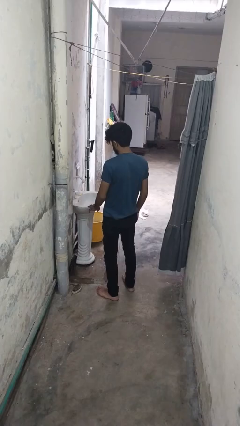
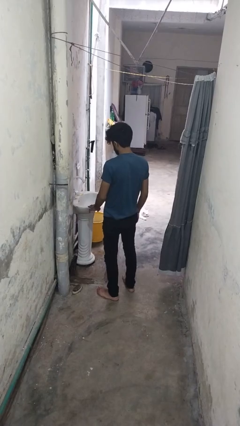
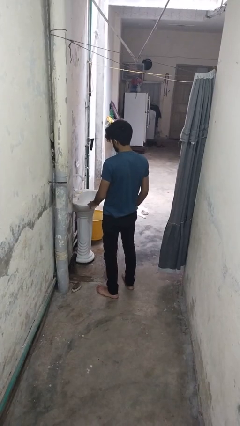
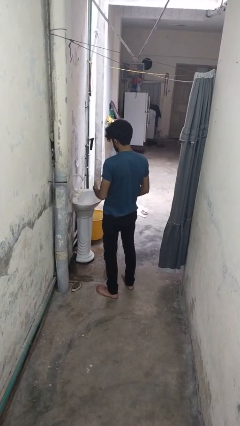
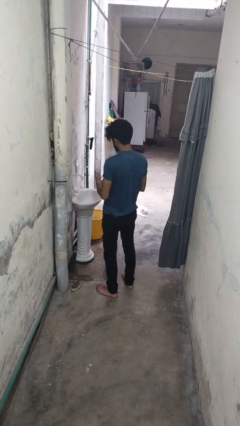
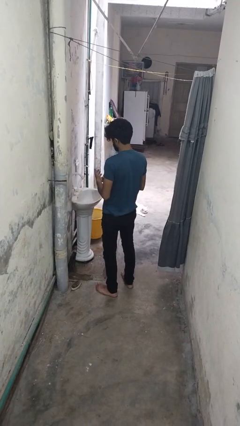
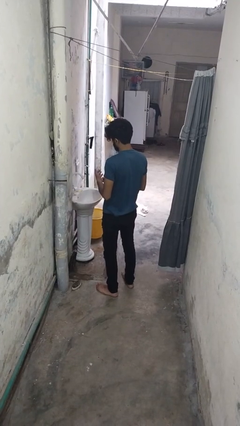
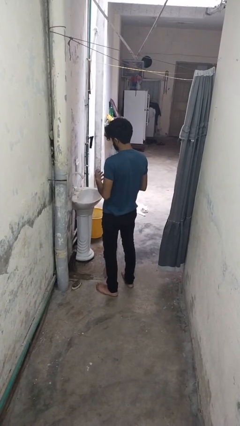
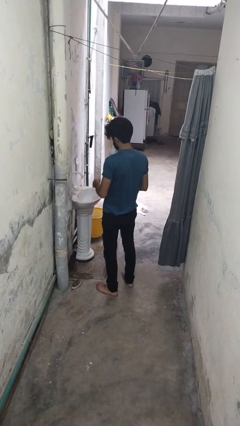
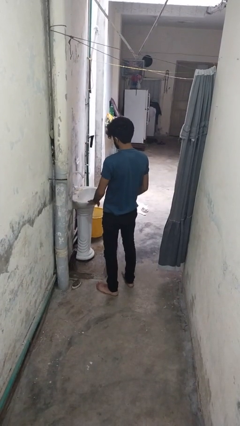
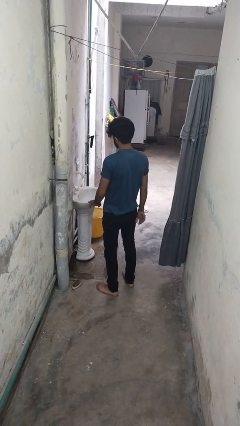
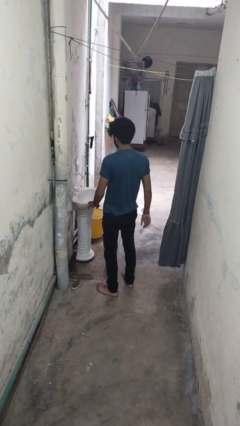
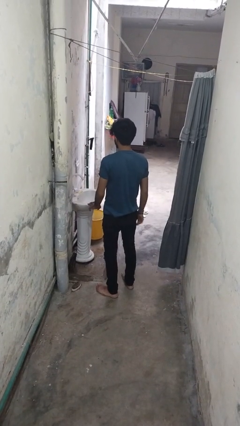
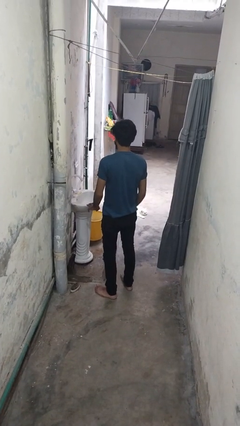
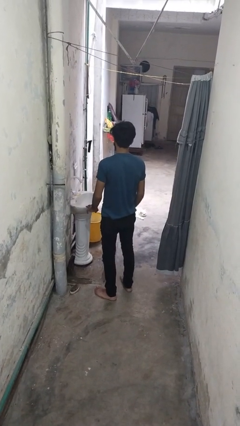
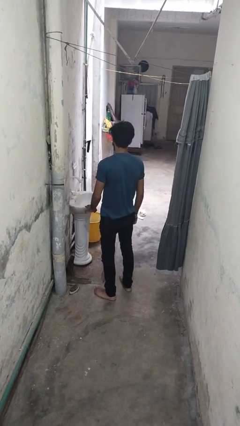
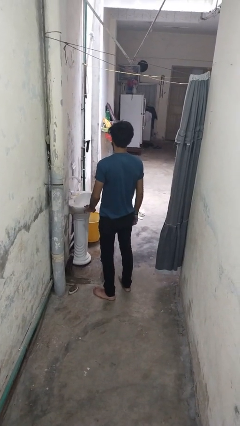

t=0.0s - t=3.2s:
person takes off ring

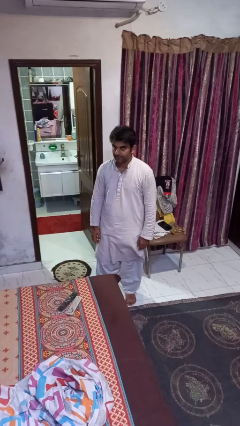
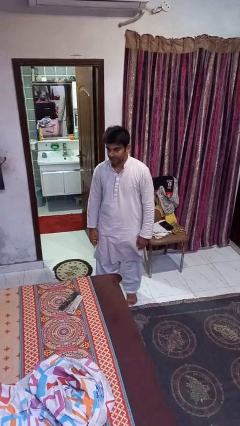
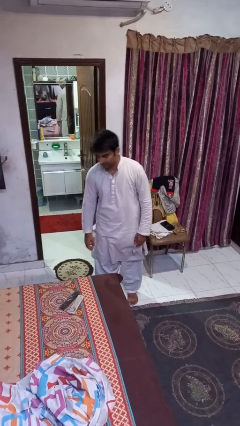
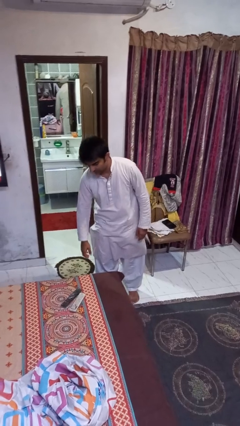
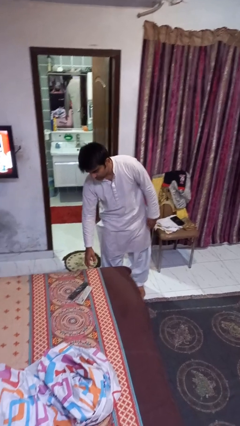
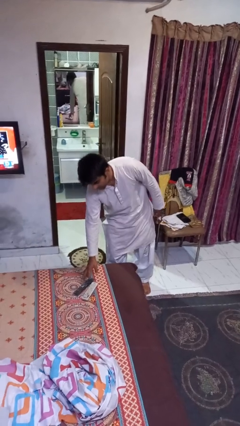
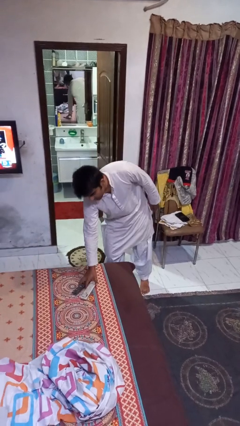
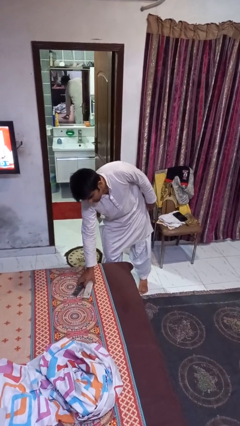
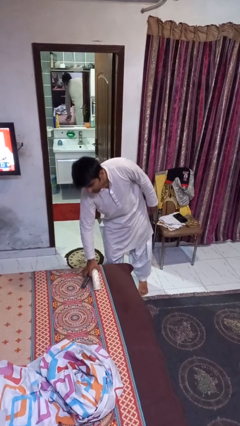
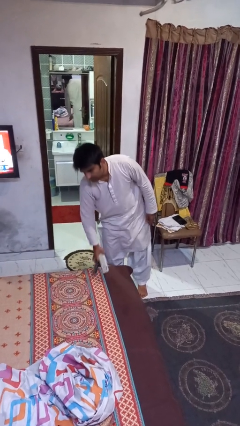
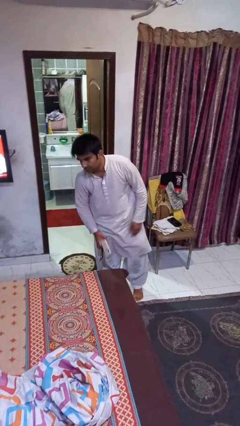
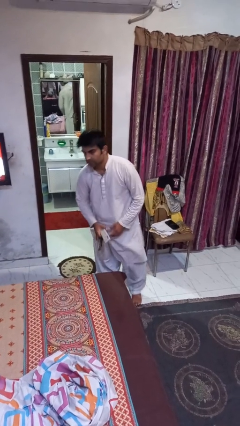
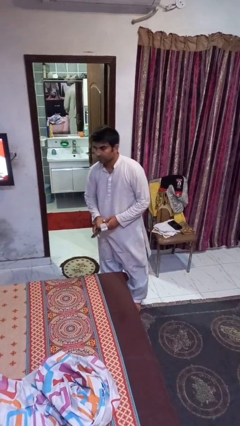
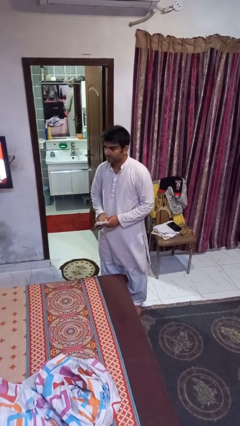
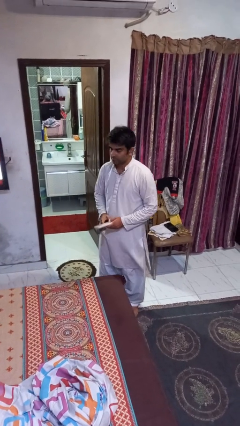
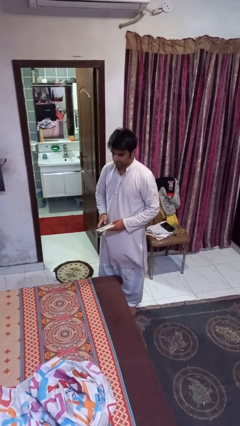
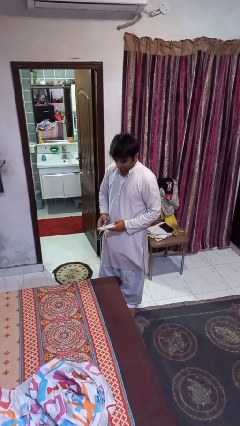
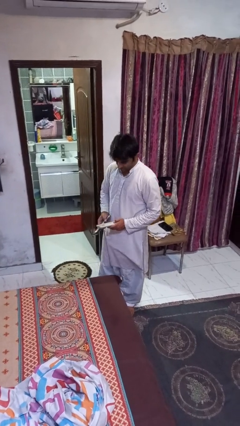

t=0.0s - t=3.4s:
person picks up object from bed

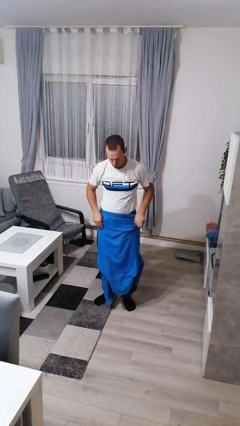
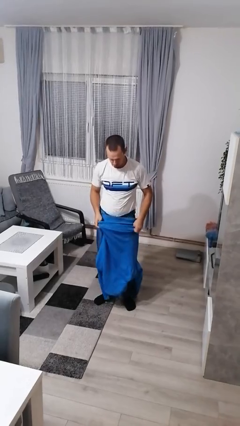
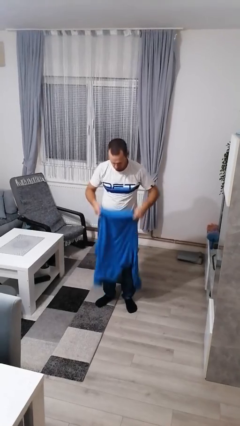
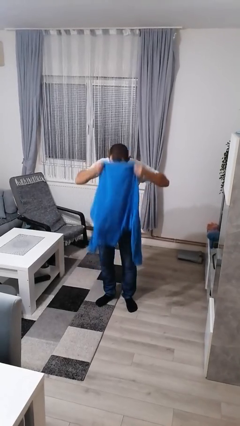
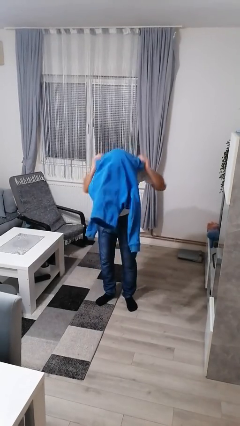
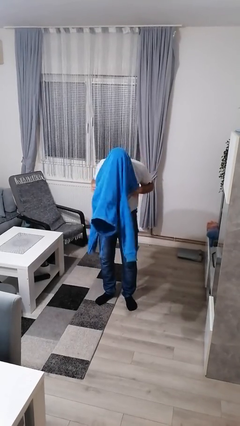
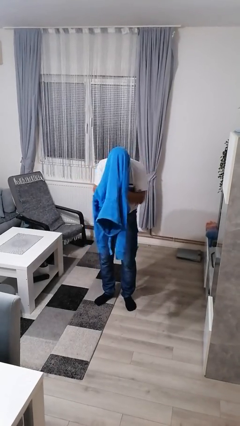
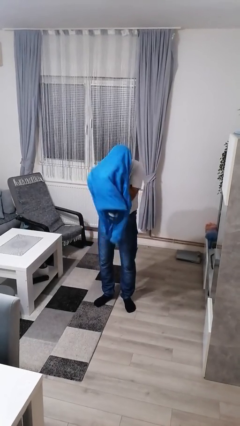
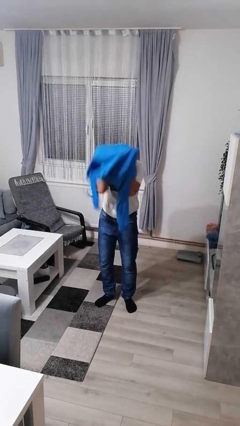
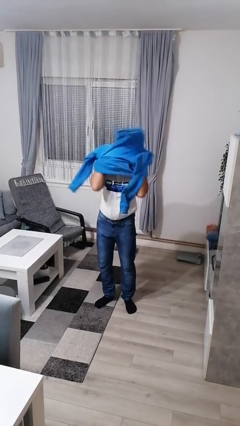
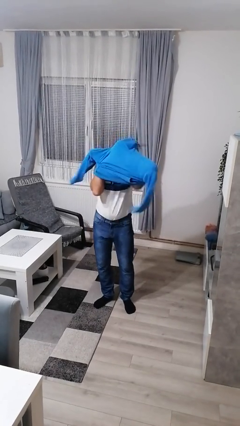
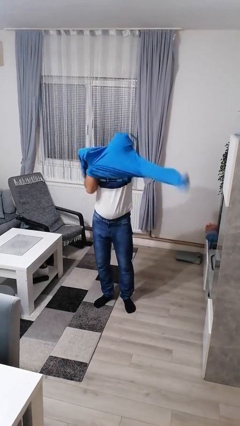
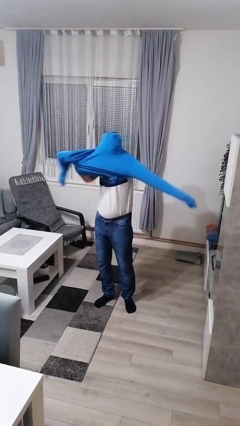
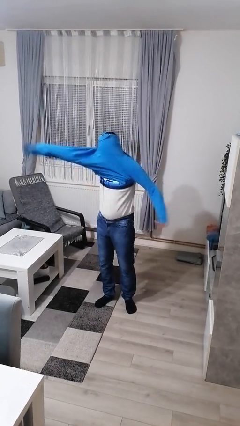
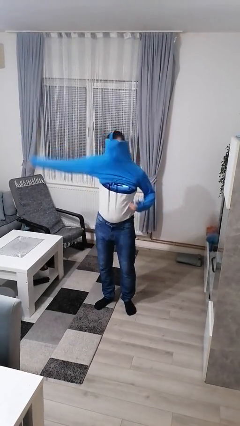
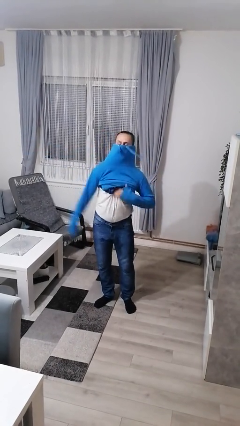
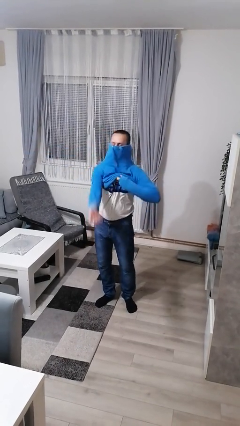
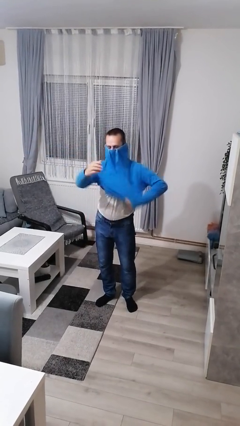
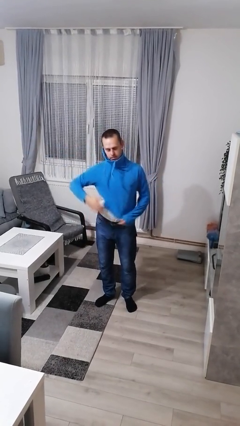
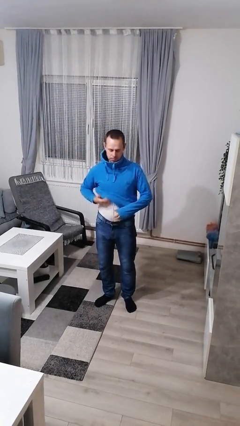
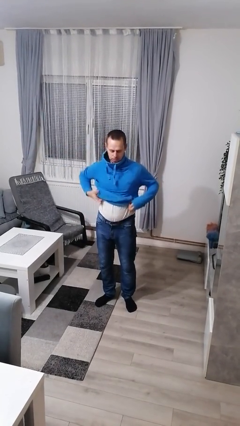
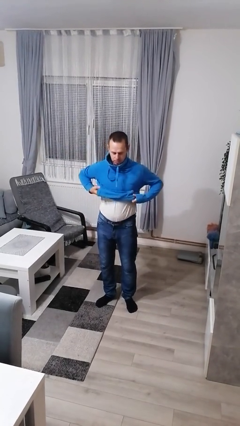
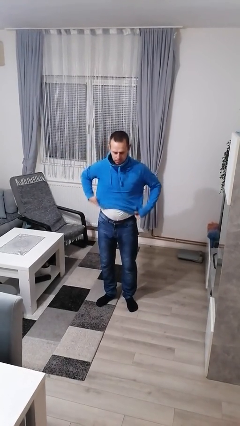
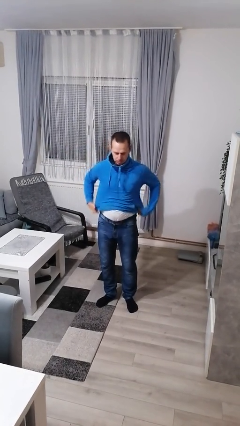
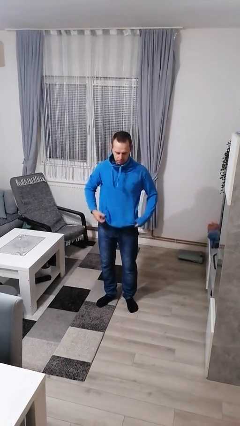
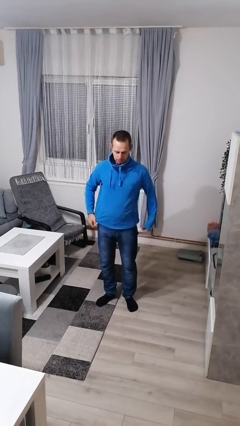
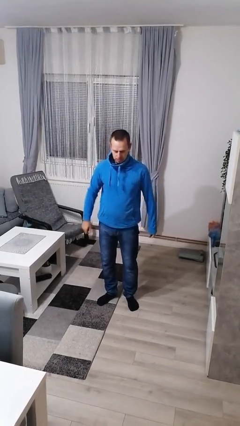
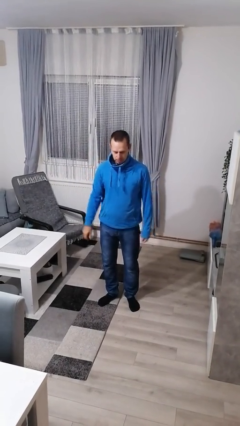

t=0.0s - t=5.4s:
person puts on hoodie

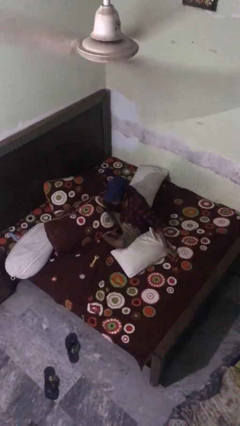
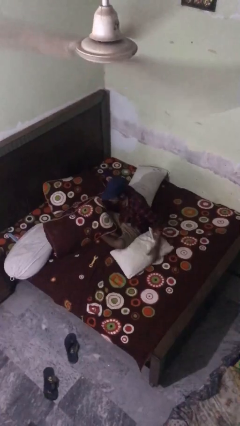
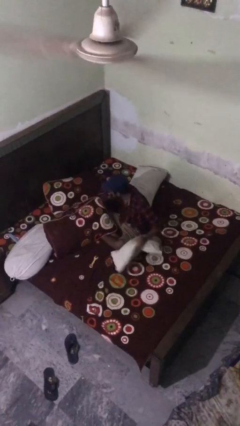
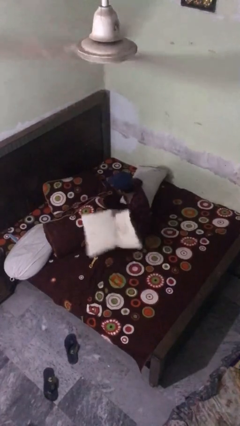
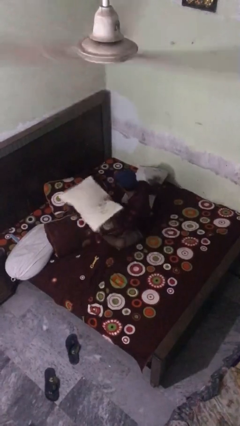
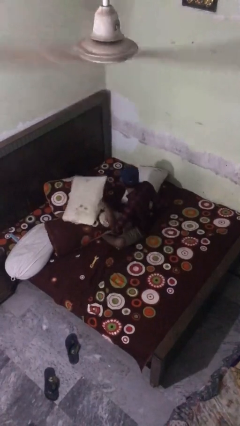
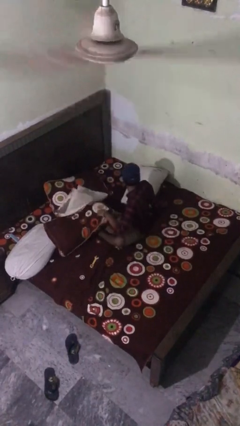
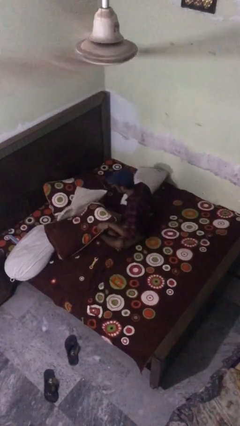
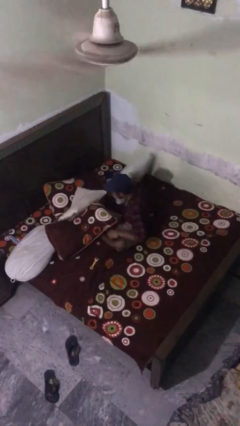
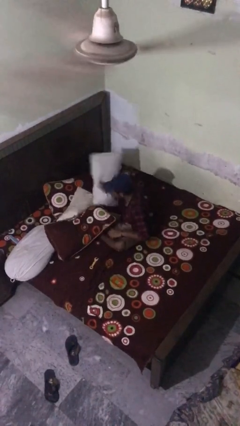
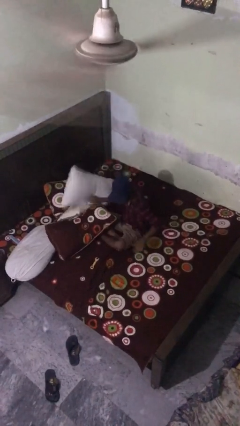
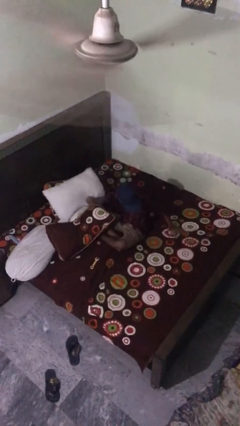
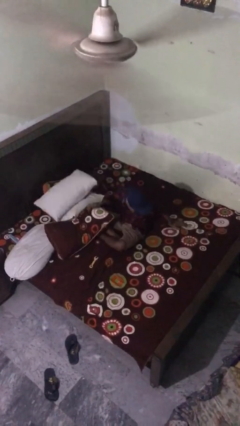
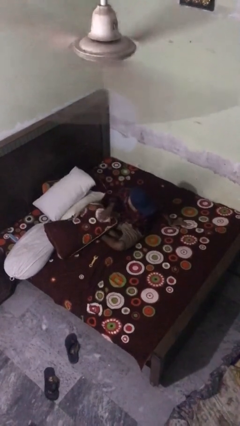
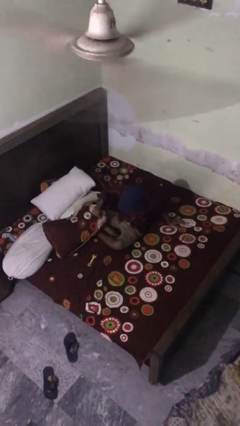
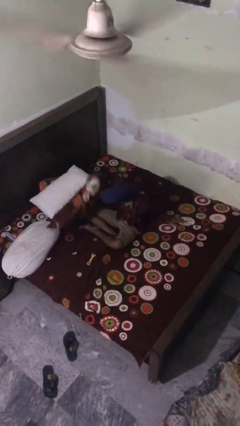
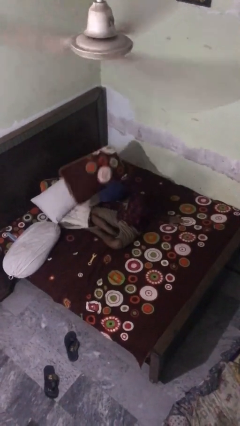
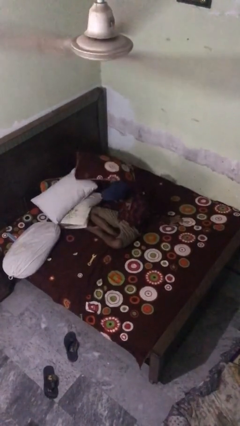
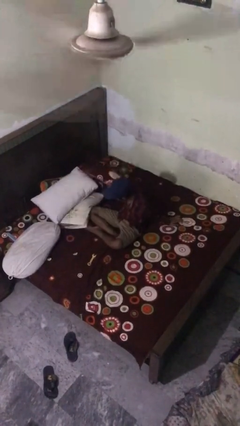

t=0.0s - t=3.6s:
person searches under bed

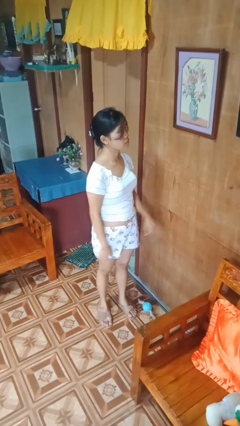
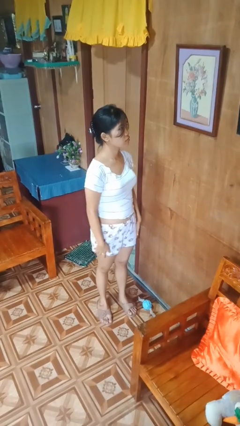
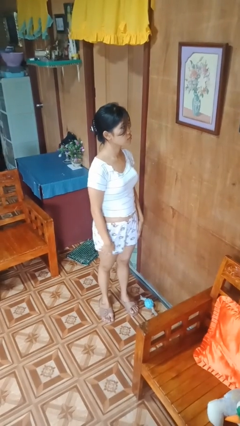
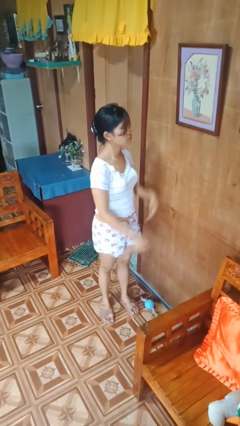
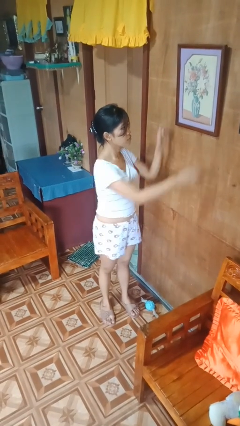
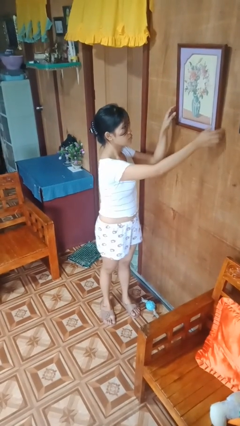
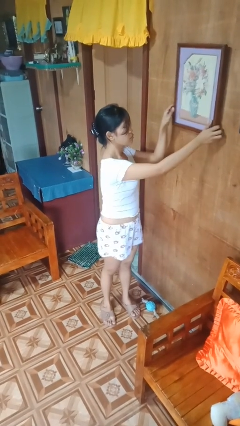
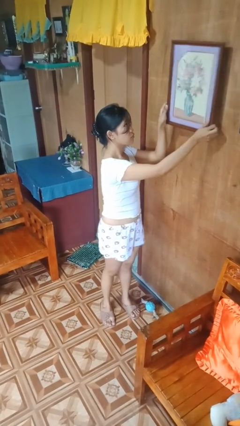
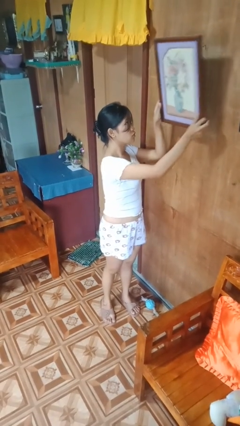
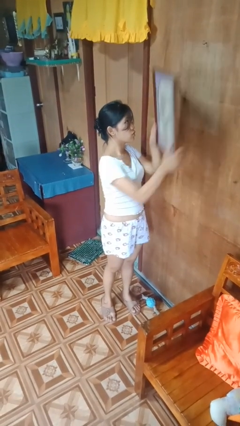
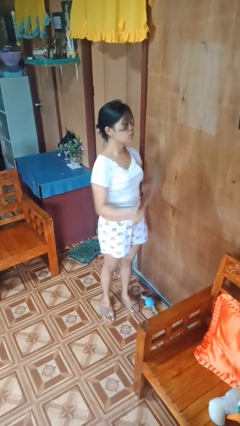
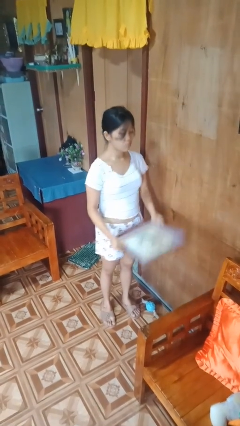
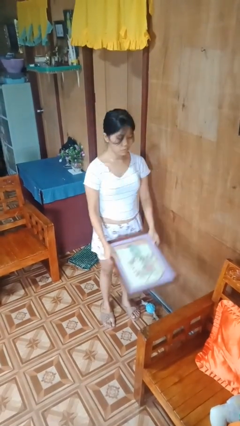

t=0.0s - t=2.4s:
person takes down picture frame
